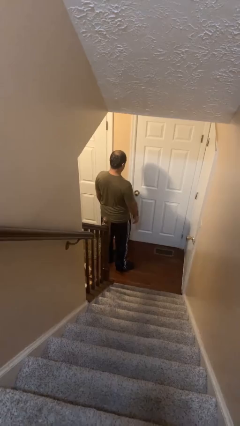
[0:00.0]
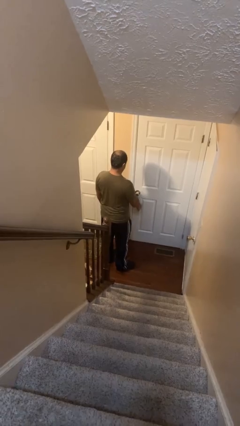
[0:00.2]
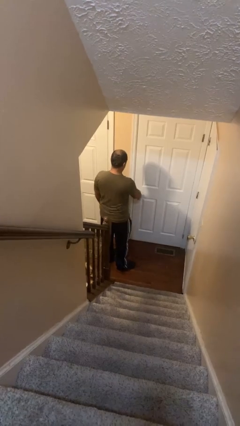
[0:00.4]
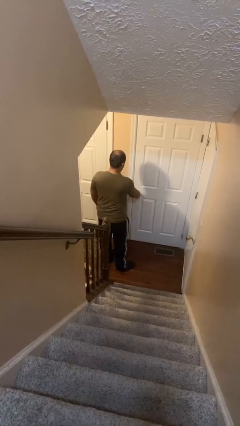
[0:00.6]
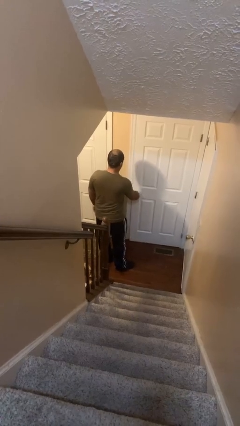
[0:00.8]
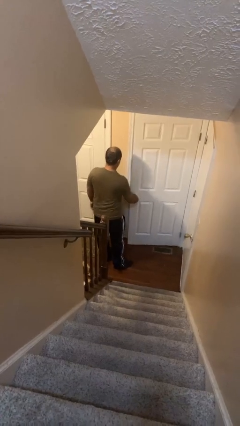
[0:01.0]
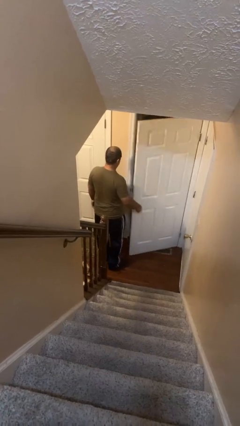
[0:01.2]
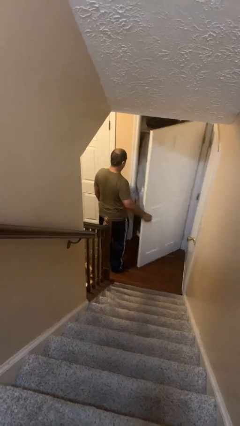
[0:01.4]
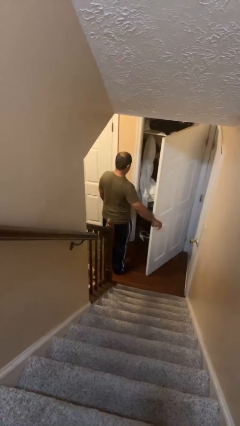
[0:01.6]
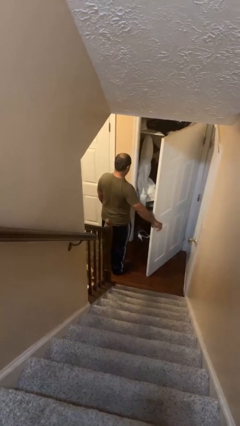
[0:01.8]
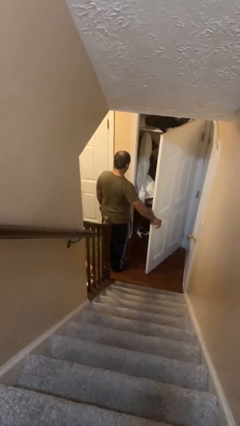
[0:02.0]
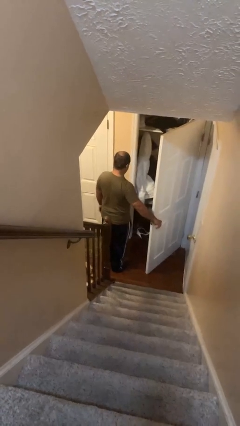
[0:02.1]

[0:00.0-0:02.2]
person opens facility door

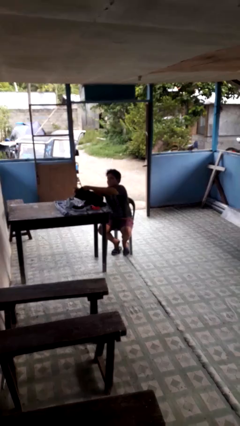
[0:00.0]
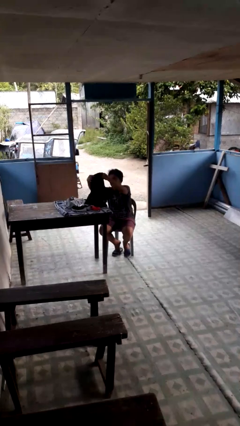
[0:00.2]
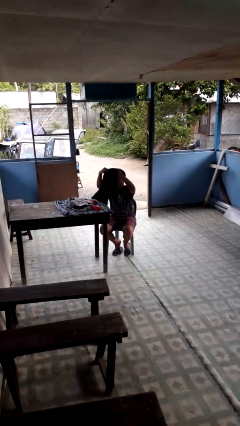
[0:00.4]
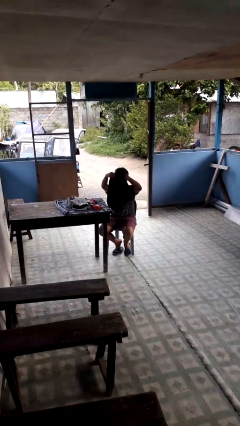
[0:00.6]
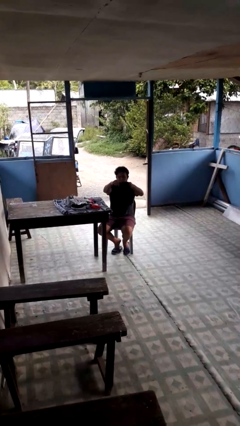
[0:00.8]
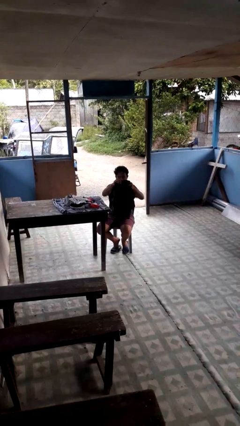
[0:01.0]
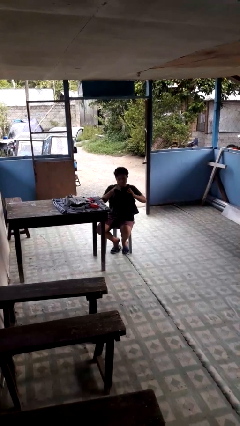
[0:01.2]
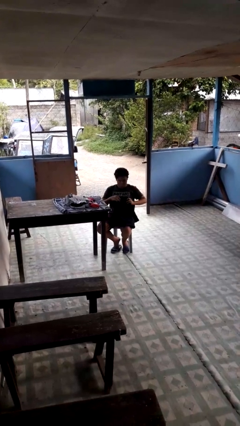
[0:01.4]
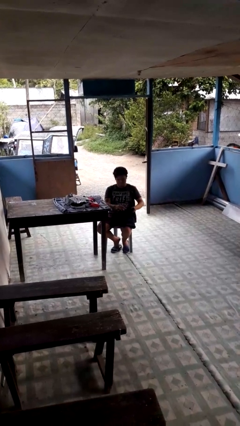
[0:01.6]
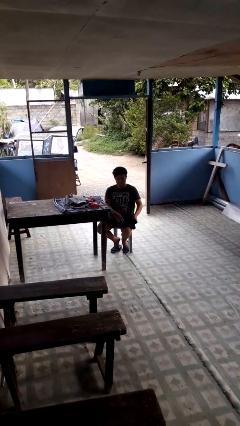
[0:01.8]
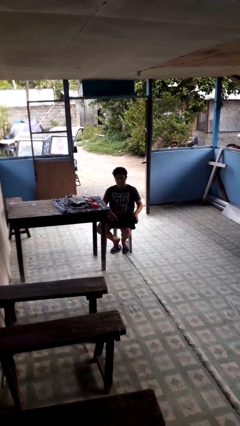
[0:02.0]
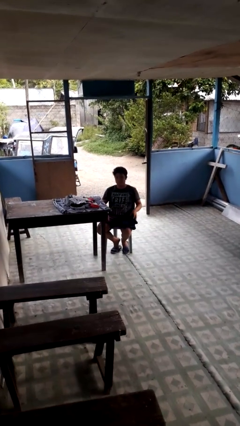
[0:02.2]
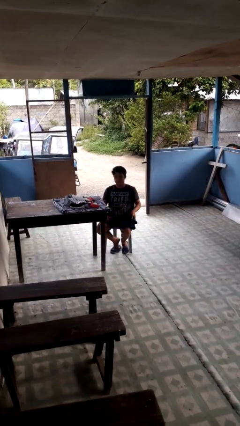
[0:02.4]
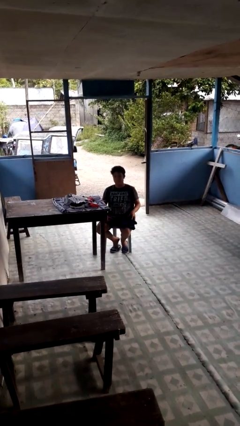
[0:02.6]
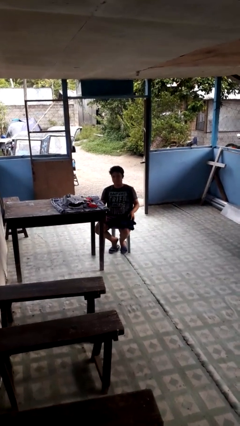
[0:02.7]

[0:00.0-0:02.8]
person folds pants

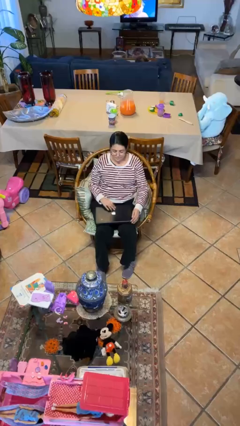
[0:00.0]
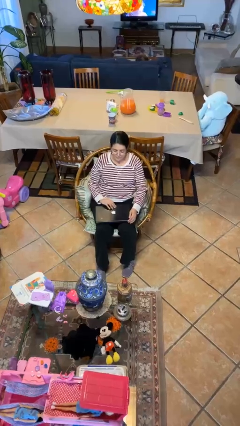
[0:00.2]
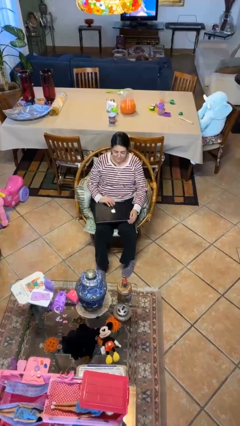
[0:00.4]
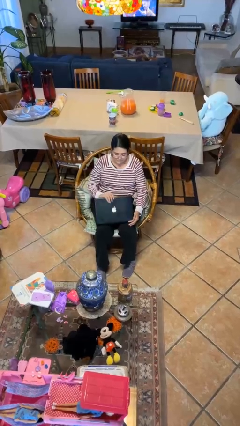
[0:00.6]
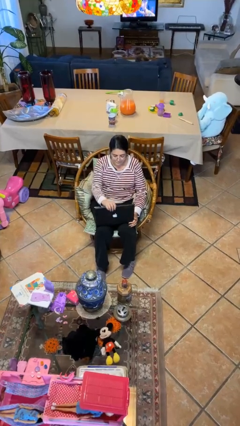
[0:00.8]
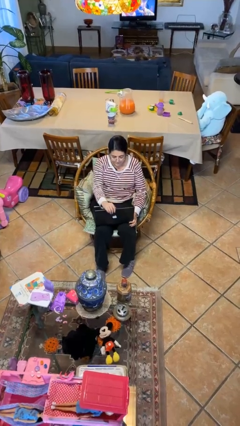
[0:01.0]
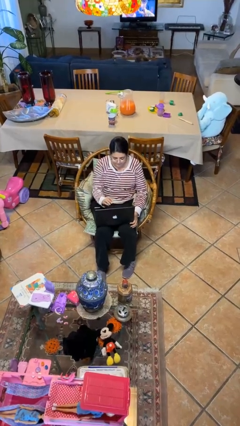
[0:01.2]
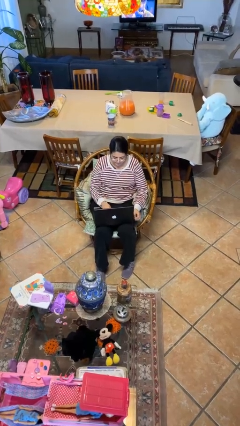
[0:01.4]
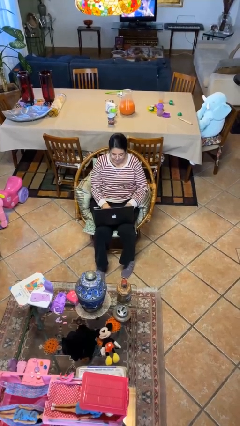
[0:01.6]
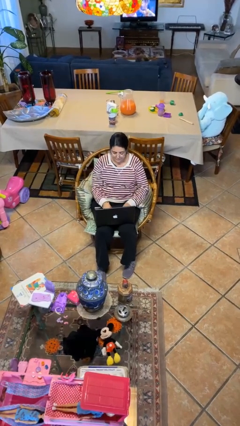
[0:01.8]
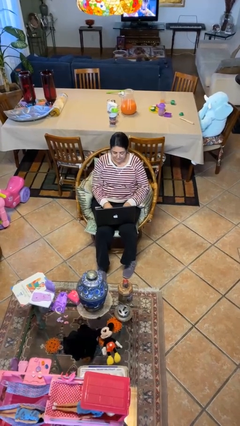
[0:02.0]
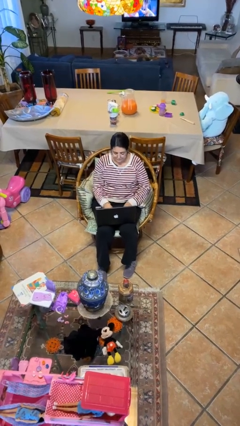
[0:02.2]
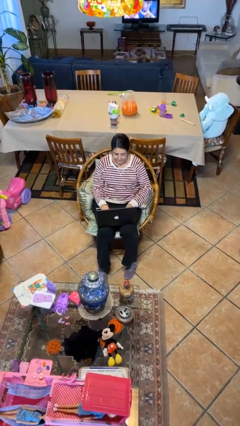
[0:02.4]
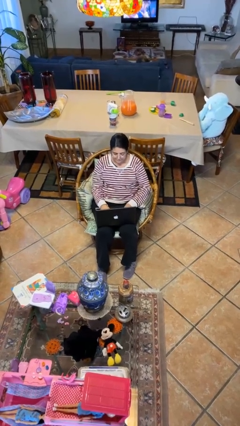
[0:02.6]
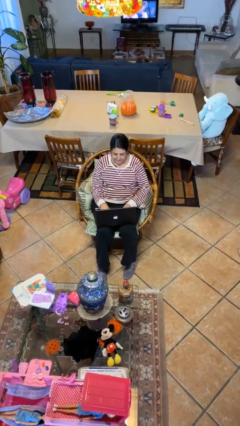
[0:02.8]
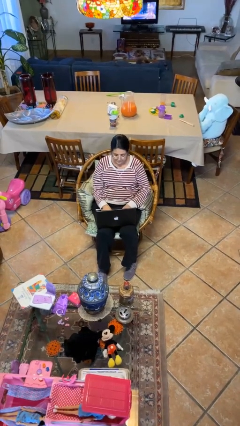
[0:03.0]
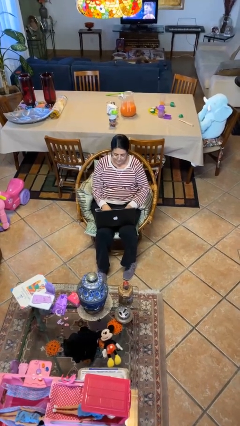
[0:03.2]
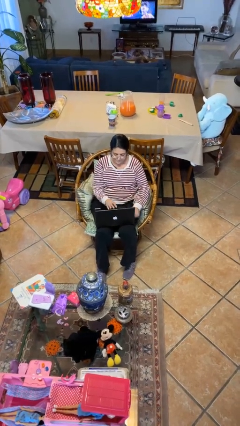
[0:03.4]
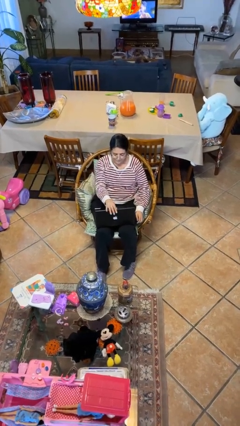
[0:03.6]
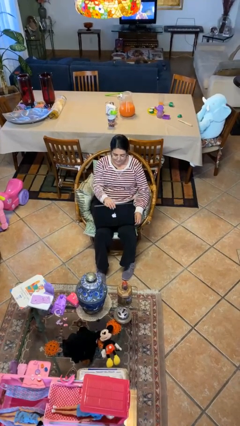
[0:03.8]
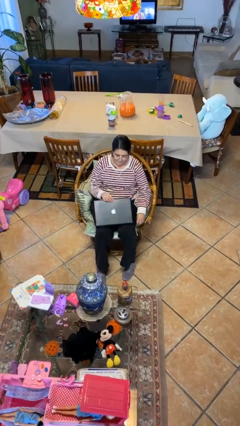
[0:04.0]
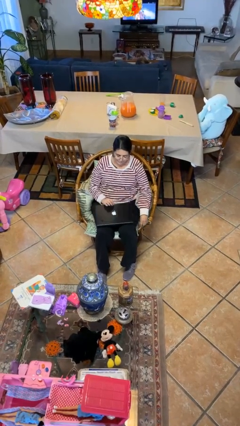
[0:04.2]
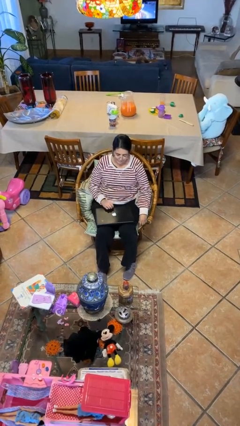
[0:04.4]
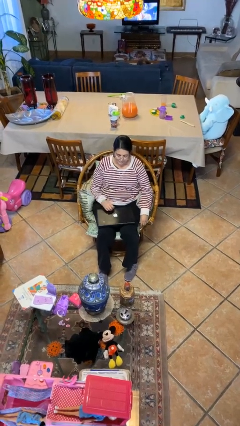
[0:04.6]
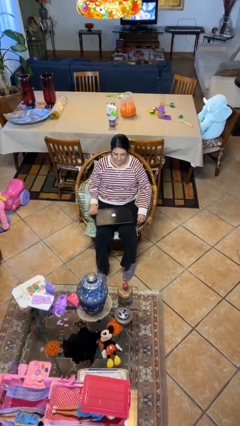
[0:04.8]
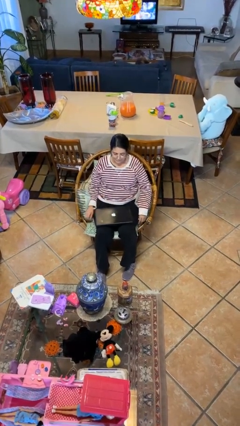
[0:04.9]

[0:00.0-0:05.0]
person interacts with laptop

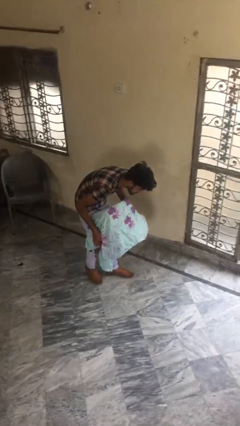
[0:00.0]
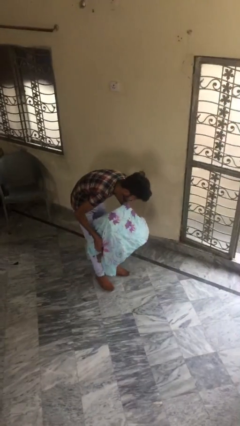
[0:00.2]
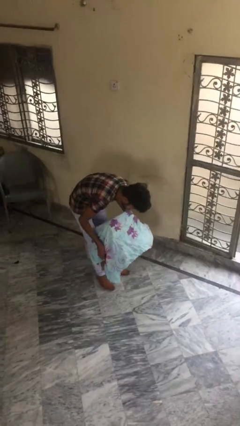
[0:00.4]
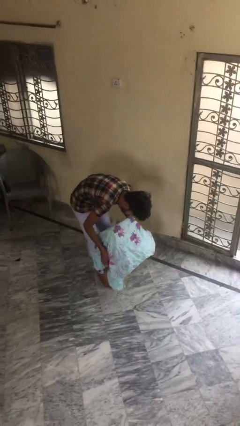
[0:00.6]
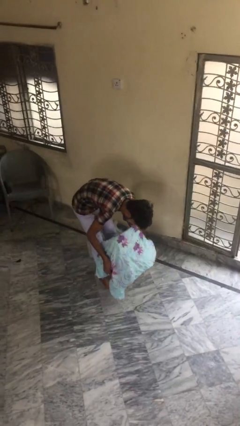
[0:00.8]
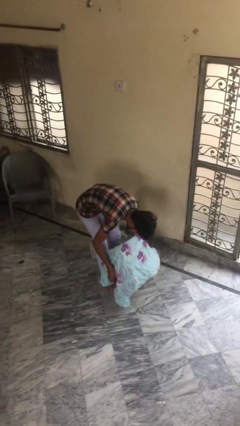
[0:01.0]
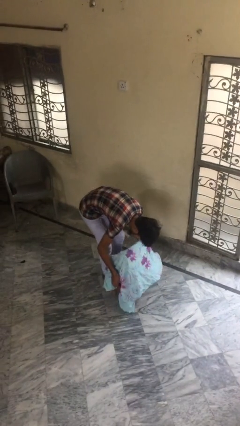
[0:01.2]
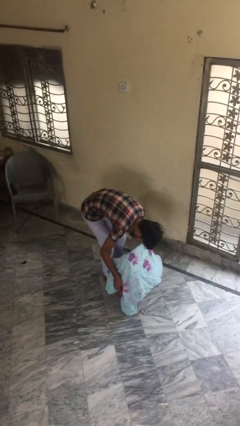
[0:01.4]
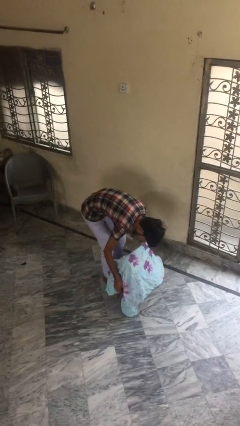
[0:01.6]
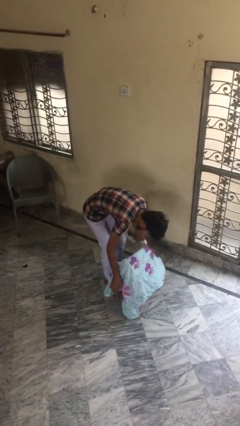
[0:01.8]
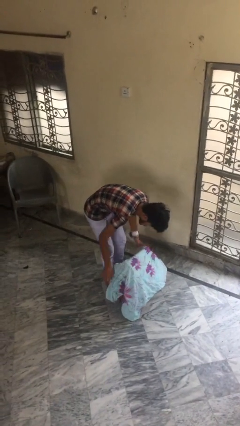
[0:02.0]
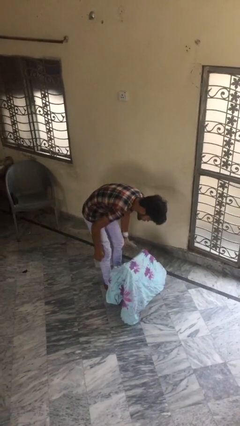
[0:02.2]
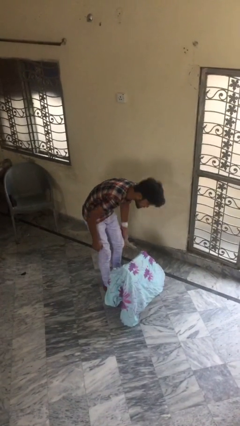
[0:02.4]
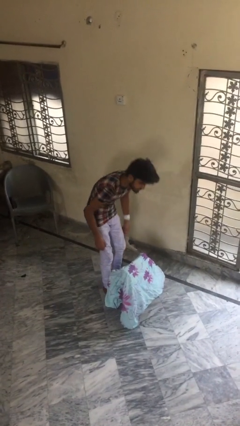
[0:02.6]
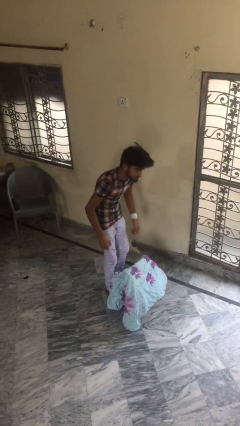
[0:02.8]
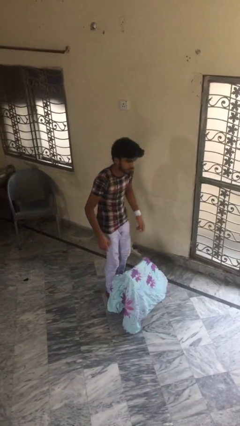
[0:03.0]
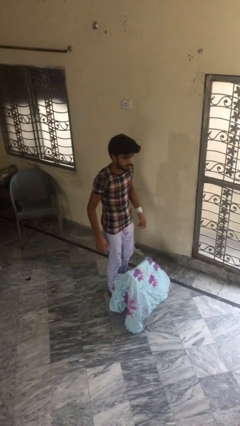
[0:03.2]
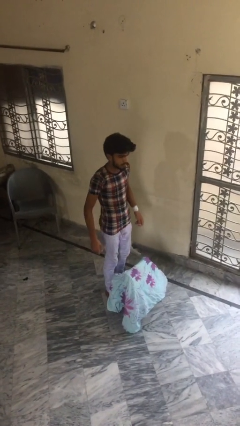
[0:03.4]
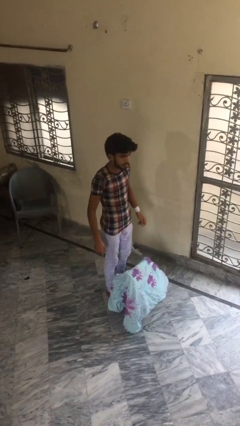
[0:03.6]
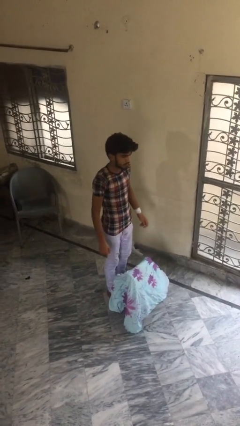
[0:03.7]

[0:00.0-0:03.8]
person puts down object on floor

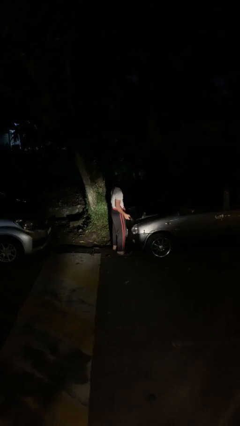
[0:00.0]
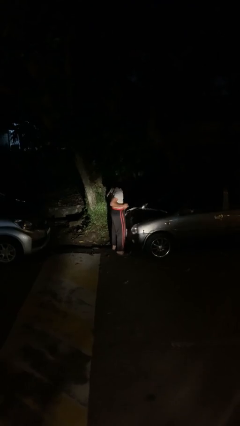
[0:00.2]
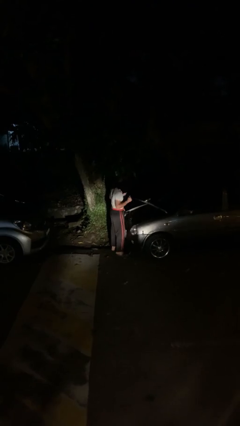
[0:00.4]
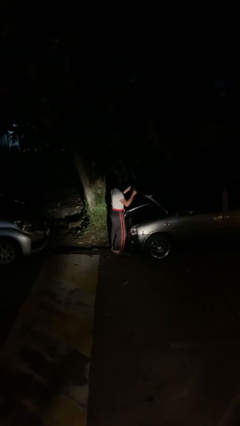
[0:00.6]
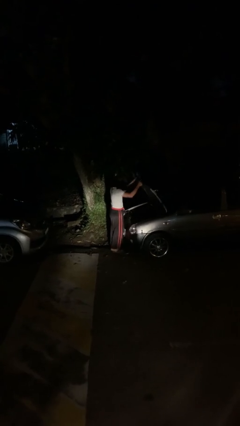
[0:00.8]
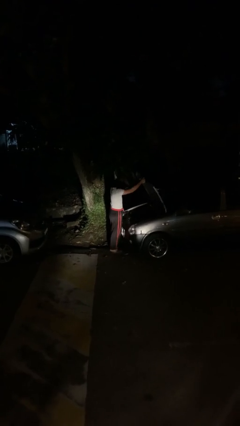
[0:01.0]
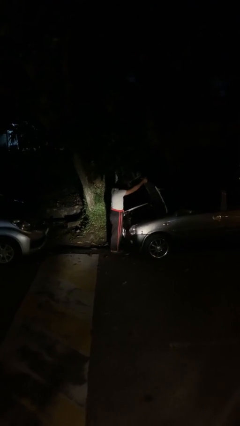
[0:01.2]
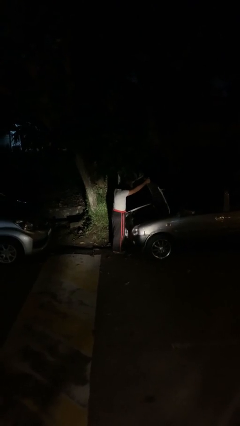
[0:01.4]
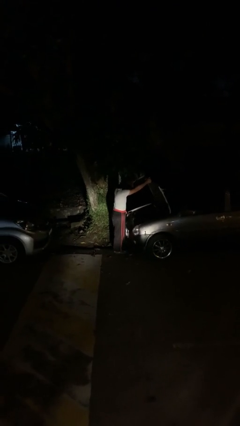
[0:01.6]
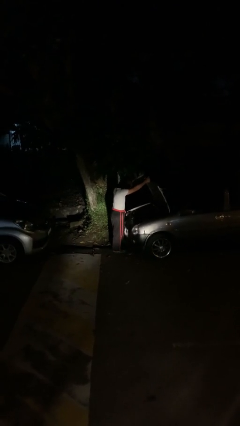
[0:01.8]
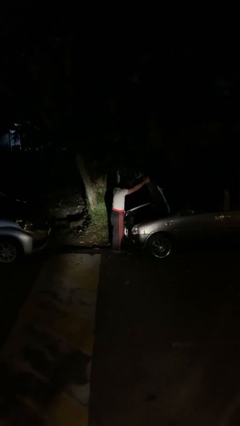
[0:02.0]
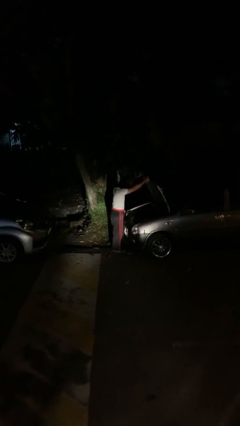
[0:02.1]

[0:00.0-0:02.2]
person opens car hood

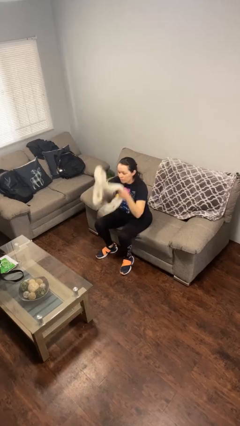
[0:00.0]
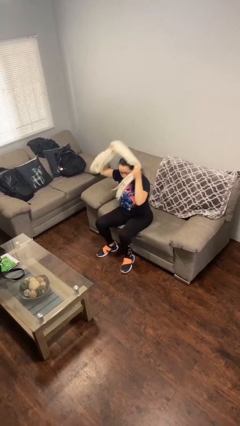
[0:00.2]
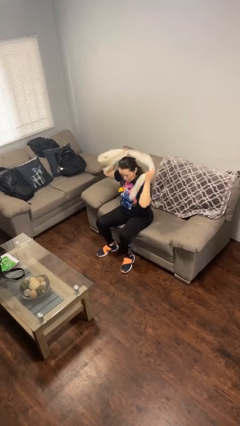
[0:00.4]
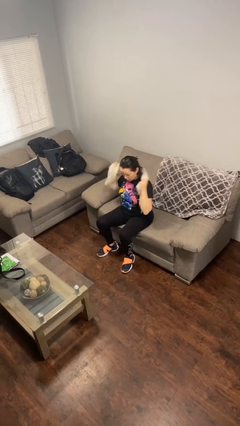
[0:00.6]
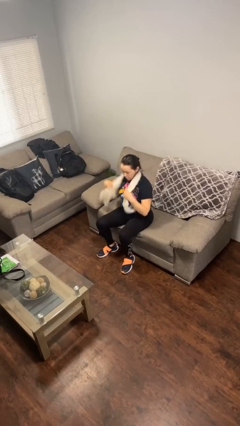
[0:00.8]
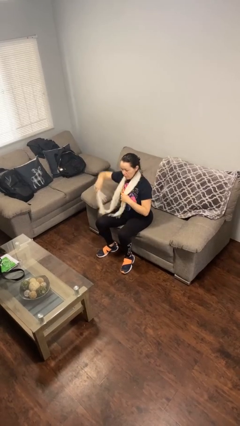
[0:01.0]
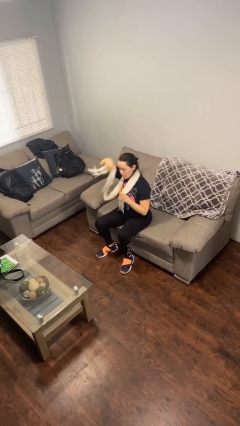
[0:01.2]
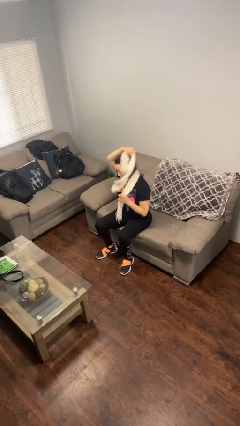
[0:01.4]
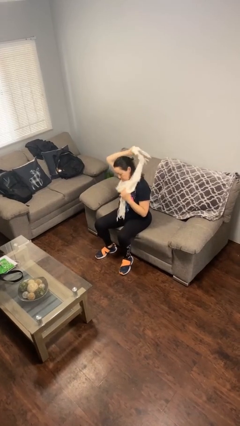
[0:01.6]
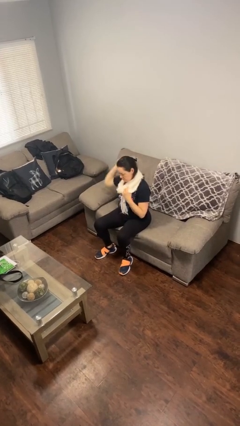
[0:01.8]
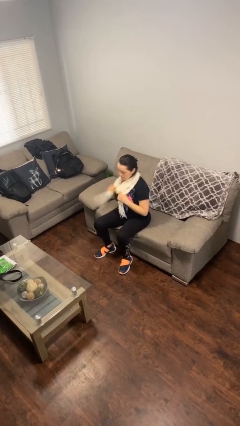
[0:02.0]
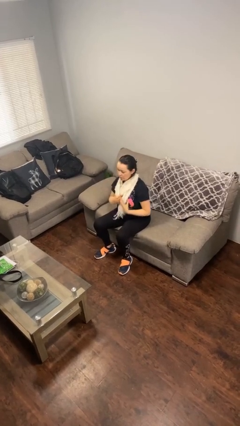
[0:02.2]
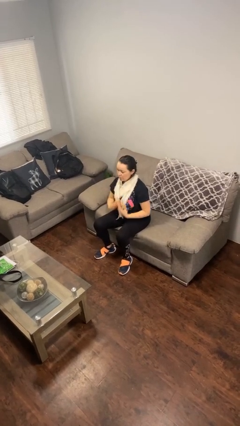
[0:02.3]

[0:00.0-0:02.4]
person puts on scarf
